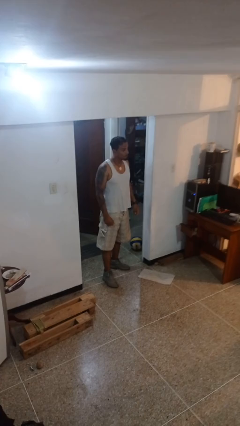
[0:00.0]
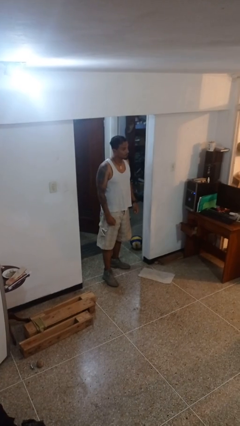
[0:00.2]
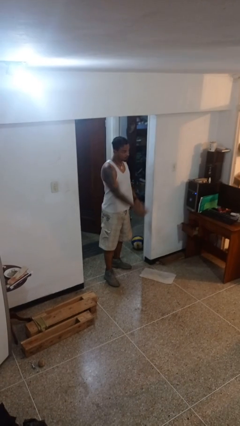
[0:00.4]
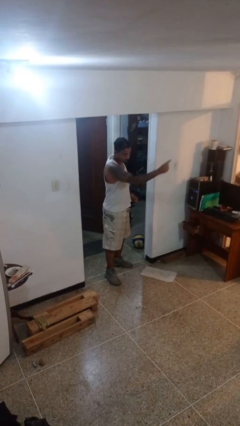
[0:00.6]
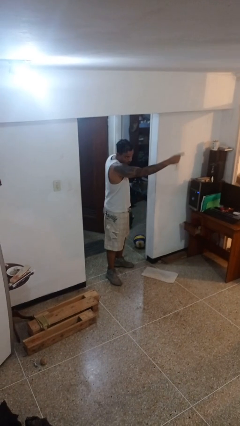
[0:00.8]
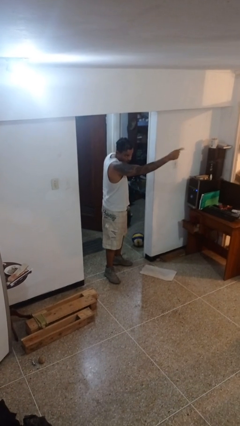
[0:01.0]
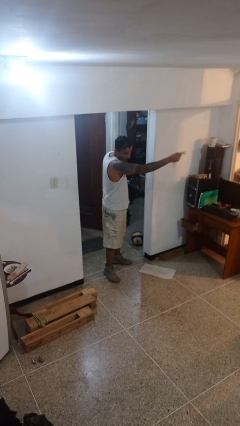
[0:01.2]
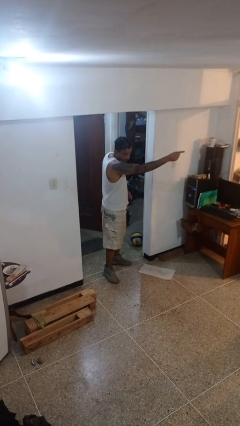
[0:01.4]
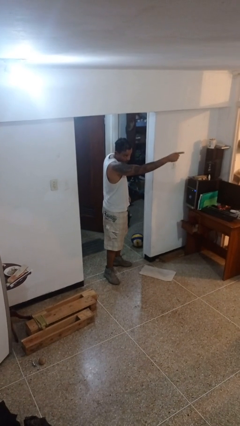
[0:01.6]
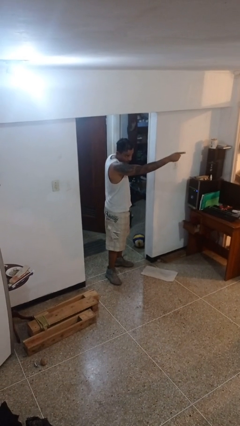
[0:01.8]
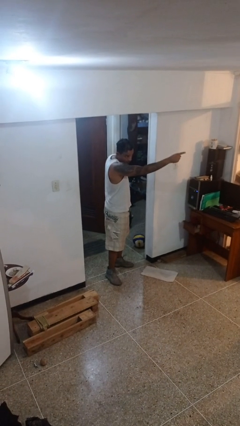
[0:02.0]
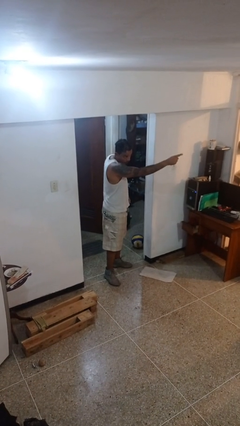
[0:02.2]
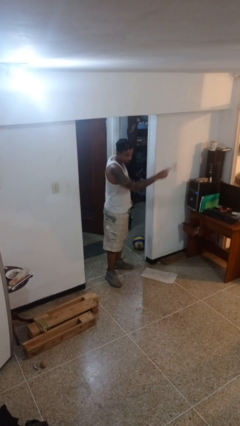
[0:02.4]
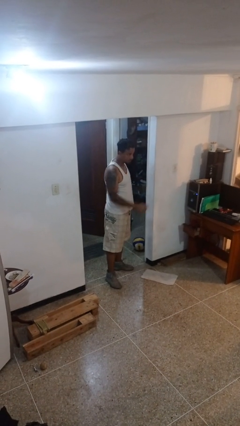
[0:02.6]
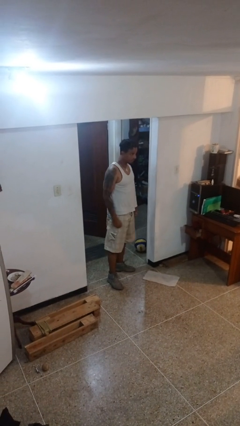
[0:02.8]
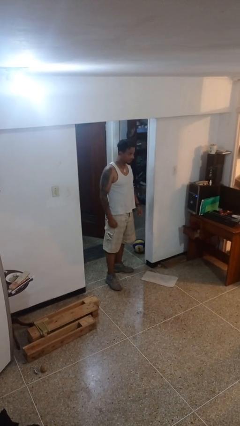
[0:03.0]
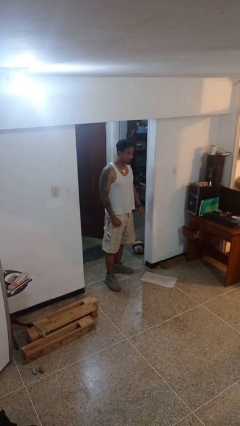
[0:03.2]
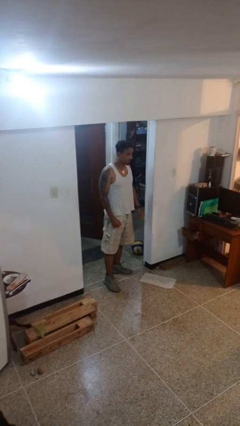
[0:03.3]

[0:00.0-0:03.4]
person points at person

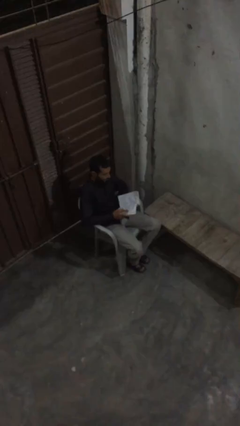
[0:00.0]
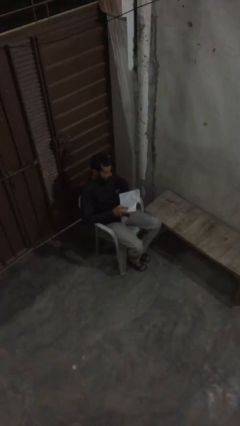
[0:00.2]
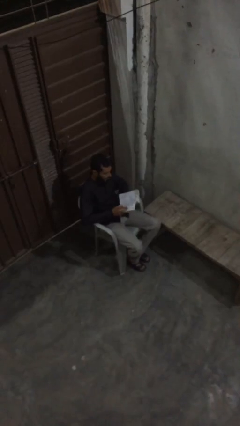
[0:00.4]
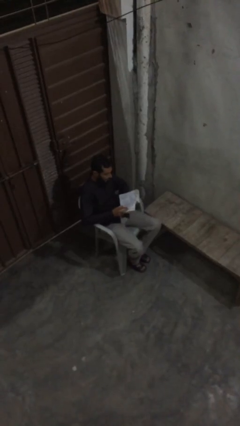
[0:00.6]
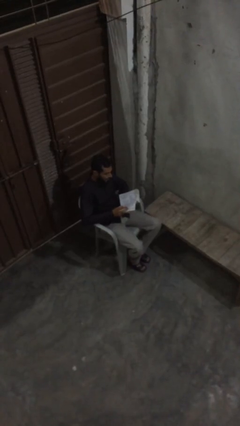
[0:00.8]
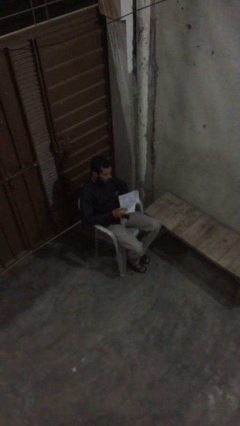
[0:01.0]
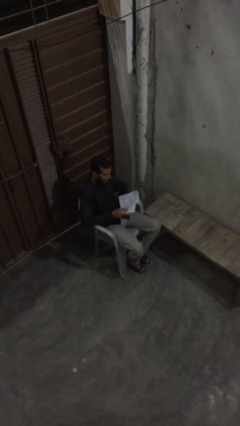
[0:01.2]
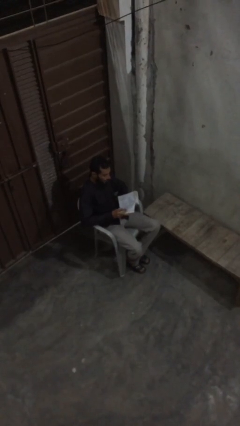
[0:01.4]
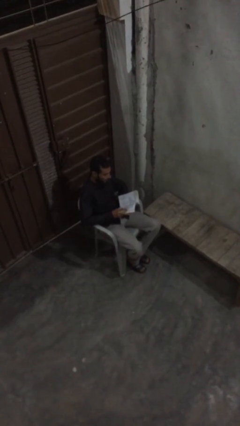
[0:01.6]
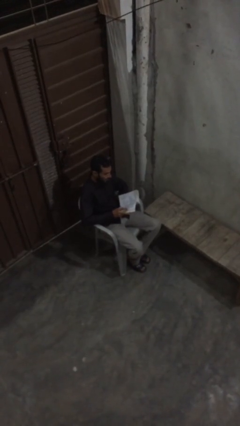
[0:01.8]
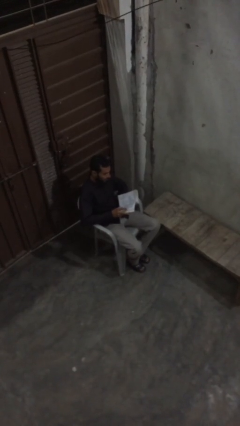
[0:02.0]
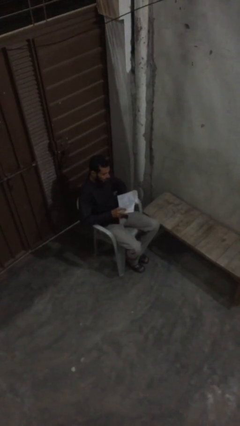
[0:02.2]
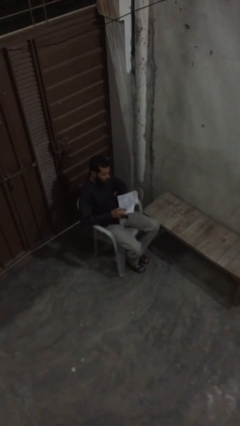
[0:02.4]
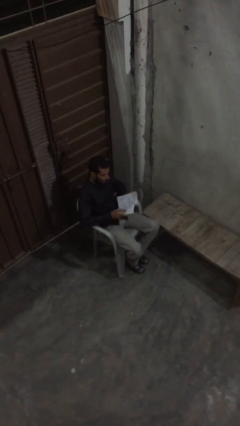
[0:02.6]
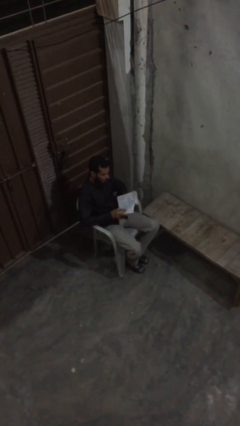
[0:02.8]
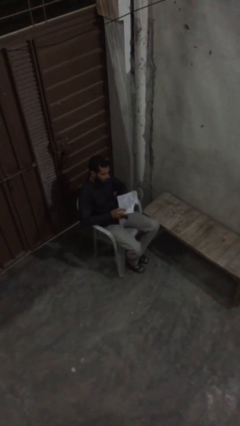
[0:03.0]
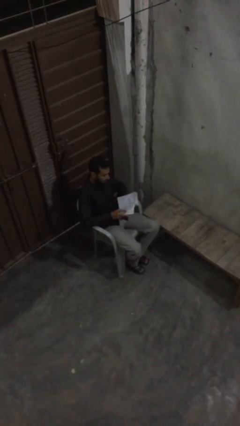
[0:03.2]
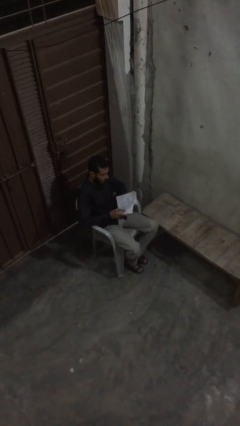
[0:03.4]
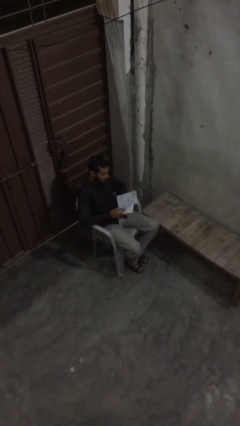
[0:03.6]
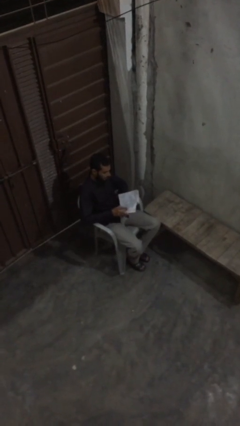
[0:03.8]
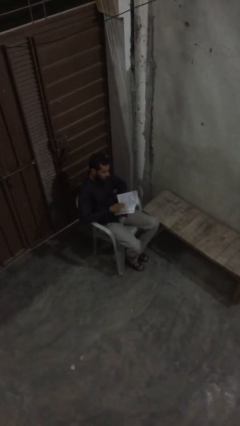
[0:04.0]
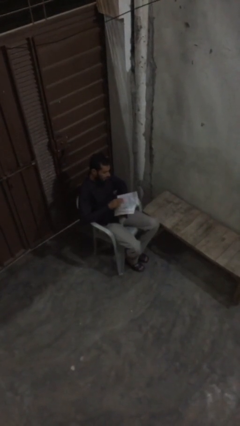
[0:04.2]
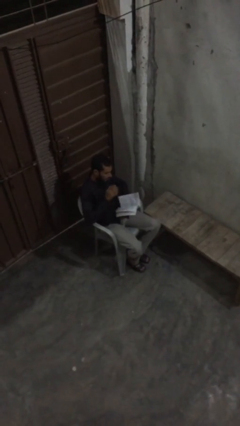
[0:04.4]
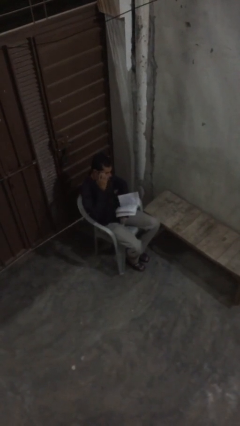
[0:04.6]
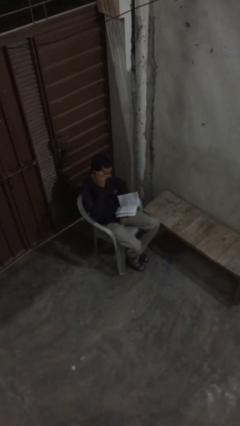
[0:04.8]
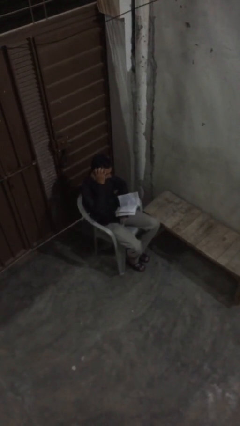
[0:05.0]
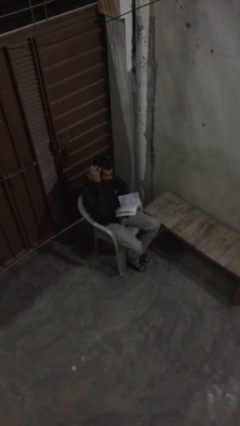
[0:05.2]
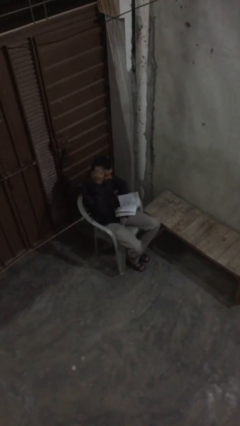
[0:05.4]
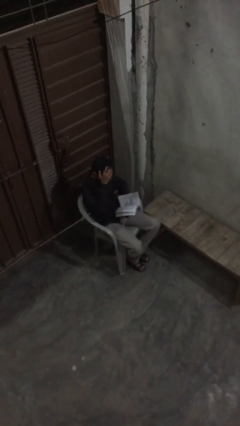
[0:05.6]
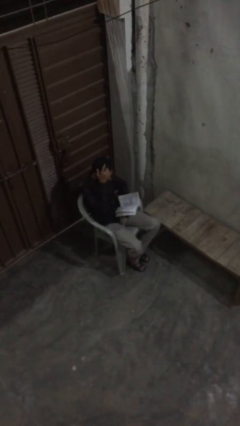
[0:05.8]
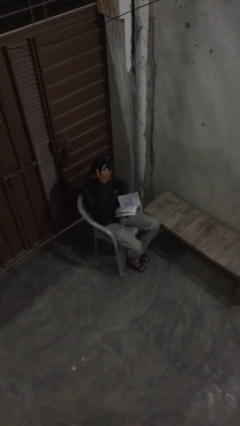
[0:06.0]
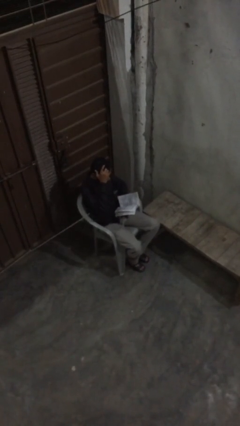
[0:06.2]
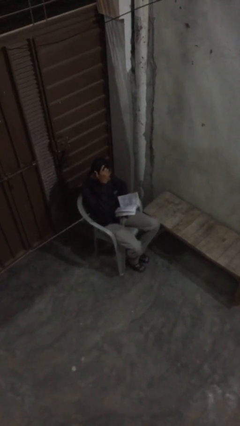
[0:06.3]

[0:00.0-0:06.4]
person reads document

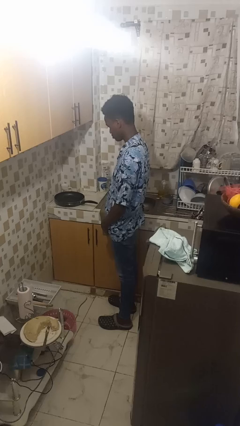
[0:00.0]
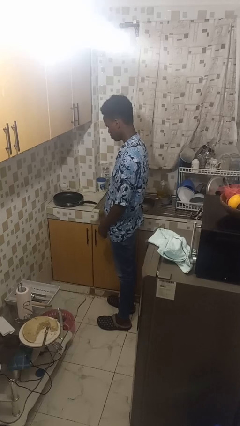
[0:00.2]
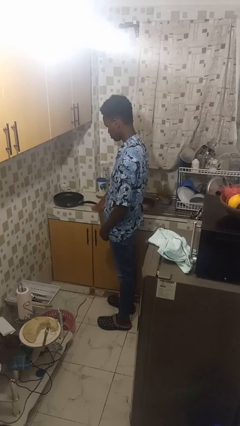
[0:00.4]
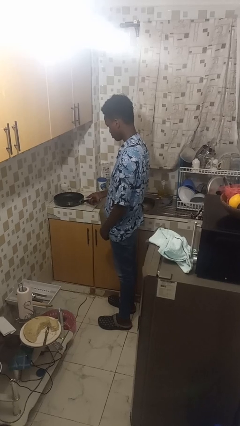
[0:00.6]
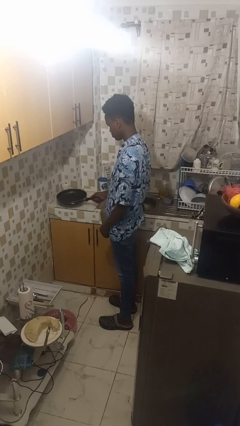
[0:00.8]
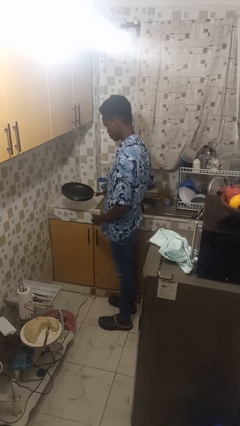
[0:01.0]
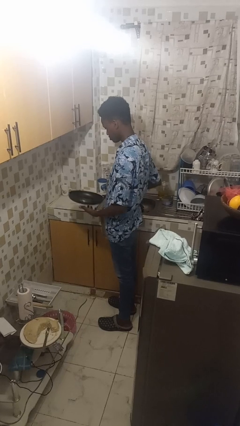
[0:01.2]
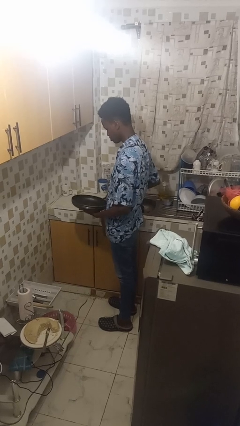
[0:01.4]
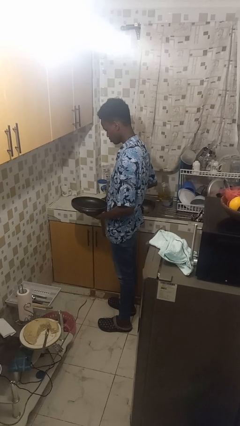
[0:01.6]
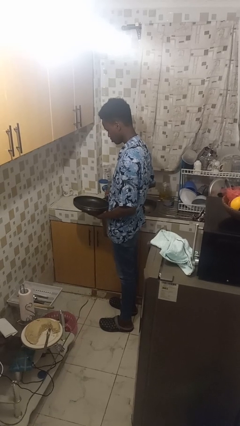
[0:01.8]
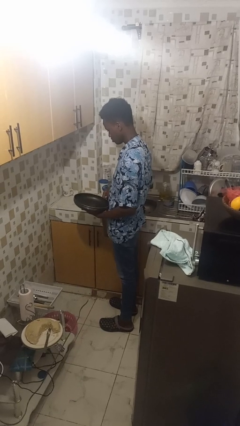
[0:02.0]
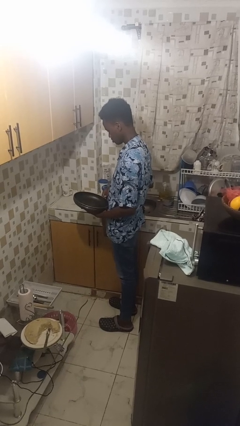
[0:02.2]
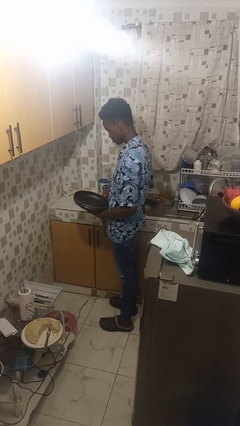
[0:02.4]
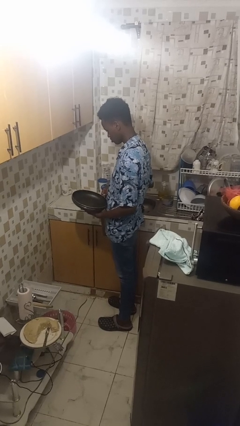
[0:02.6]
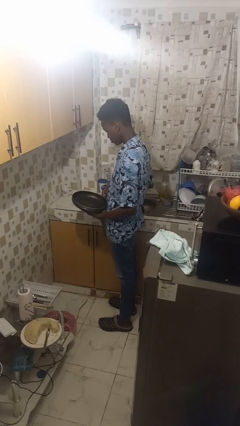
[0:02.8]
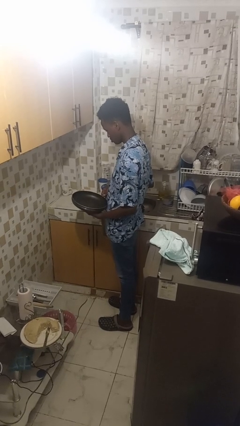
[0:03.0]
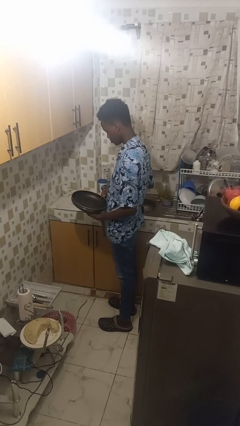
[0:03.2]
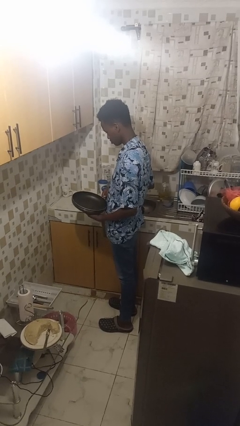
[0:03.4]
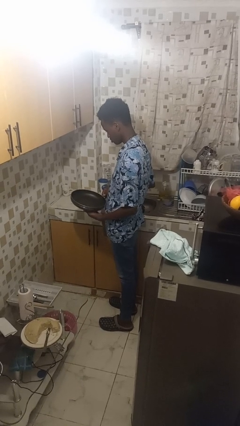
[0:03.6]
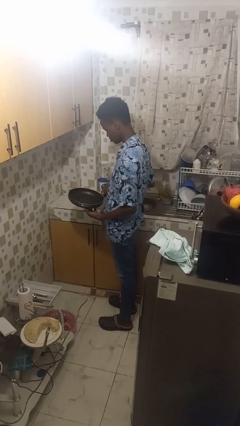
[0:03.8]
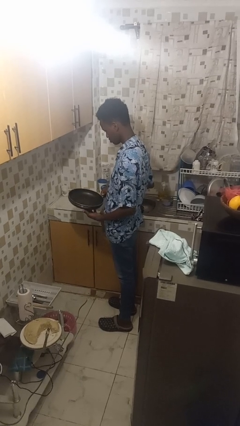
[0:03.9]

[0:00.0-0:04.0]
person picks up object from countertop

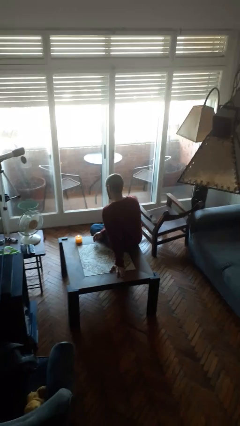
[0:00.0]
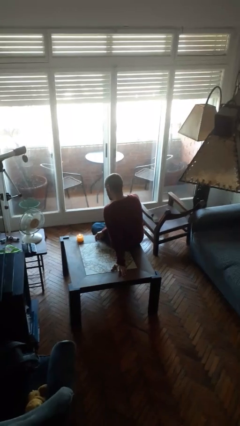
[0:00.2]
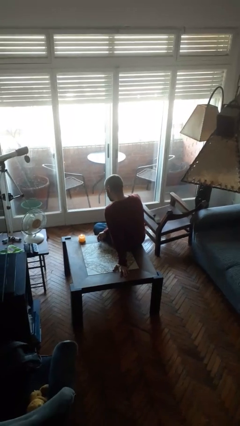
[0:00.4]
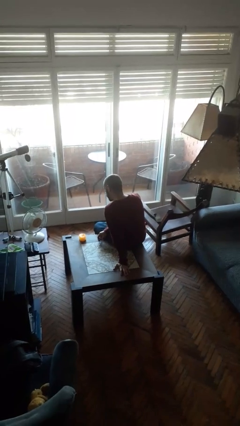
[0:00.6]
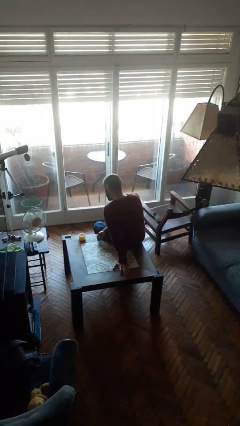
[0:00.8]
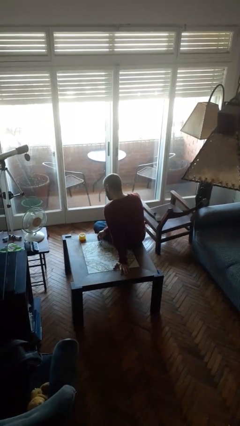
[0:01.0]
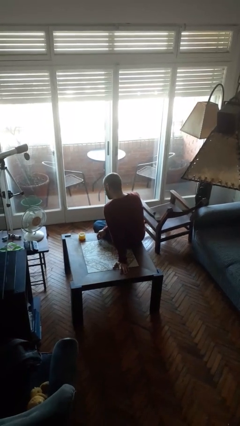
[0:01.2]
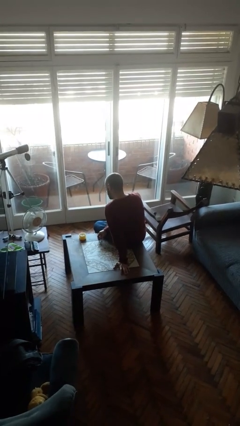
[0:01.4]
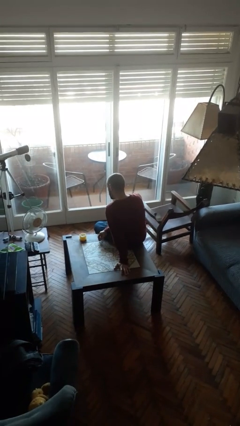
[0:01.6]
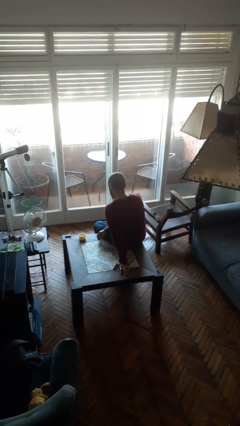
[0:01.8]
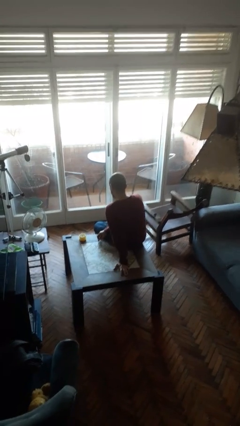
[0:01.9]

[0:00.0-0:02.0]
person extinguishes candle

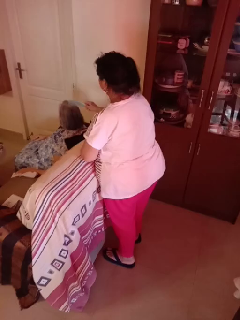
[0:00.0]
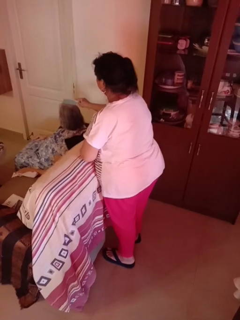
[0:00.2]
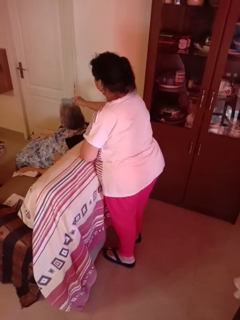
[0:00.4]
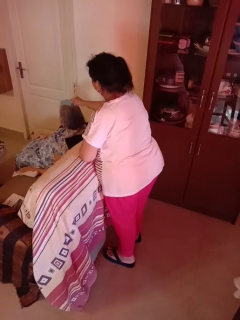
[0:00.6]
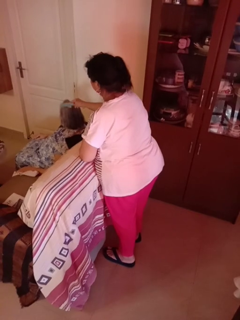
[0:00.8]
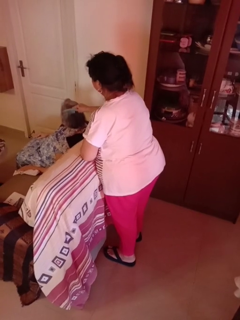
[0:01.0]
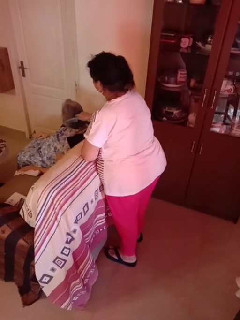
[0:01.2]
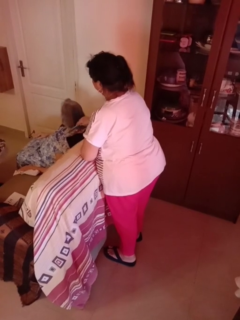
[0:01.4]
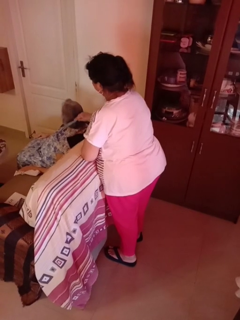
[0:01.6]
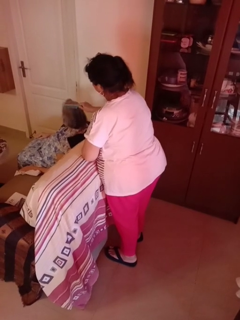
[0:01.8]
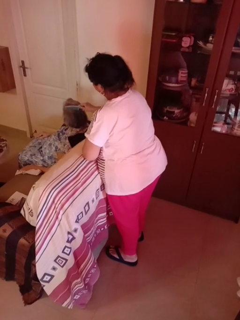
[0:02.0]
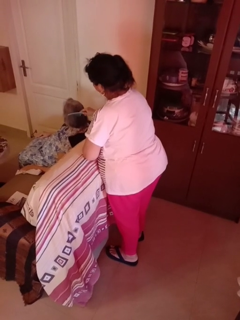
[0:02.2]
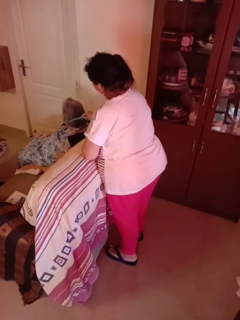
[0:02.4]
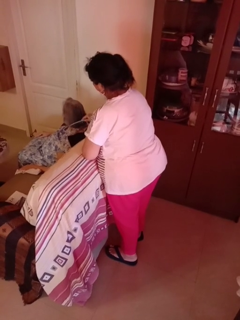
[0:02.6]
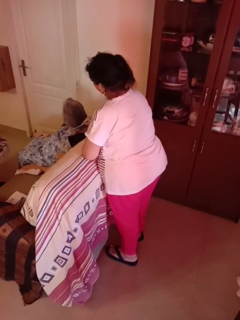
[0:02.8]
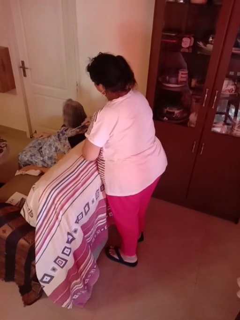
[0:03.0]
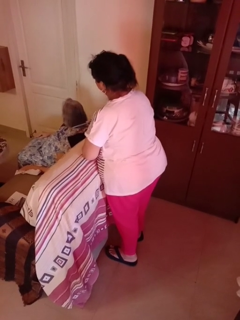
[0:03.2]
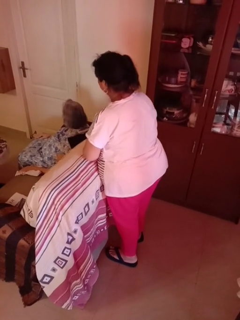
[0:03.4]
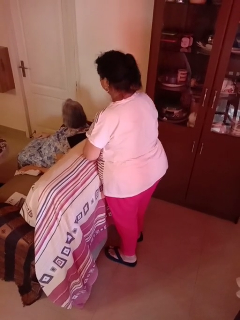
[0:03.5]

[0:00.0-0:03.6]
person brushes hair of person
